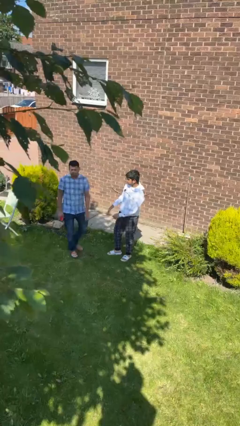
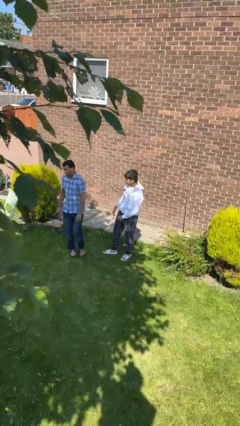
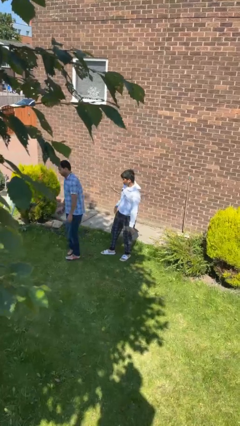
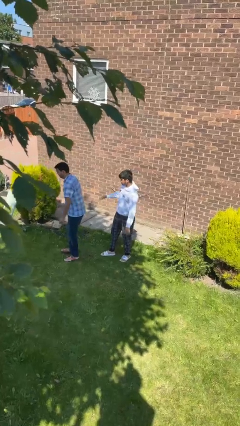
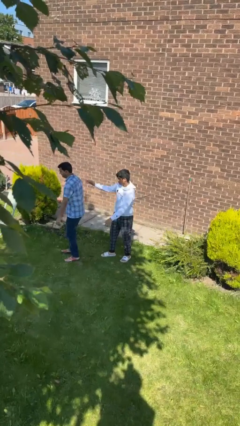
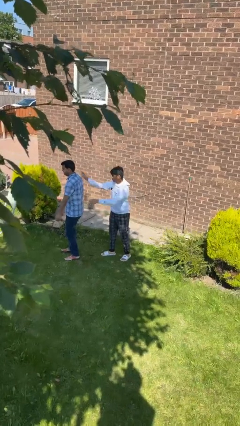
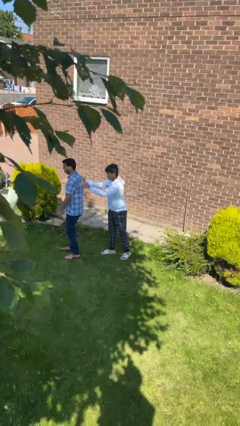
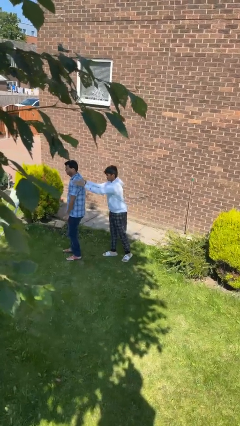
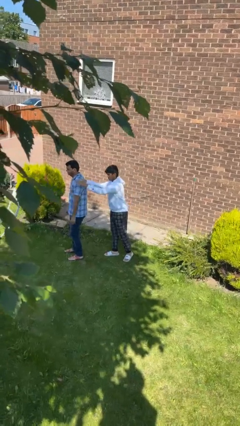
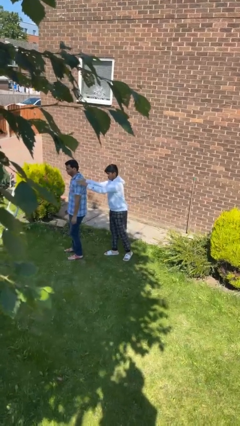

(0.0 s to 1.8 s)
person grabs person by shoulder

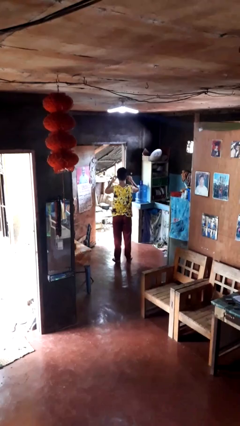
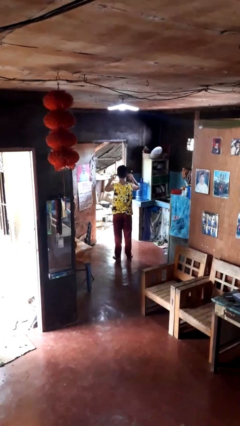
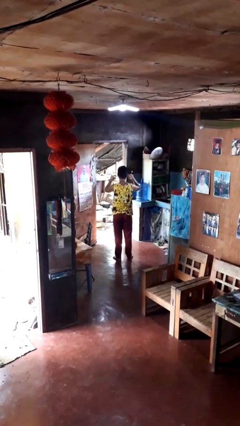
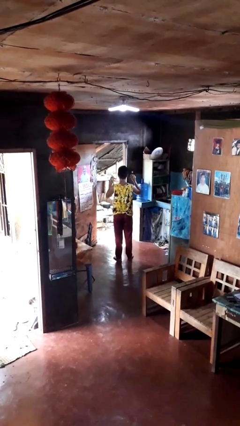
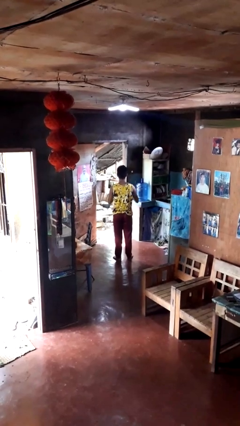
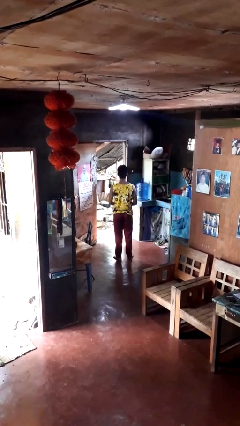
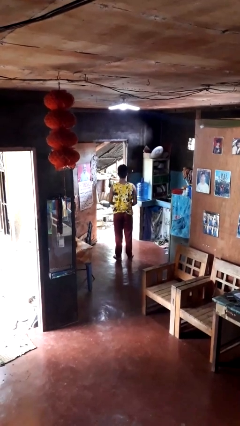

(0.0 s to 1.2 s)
person takes off headphones

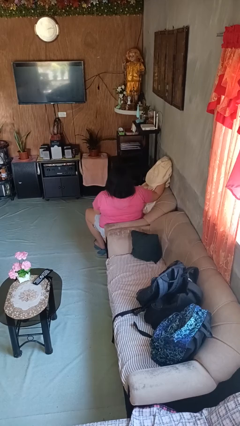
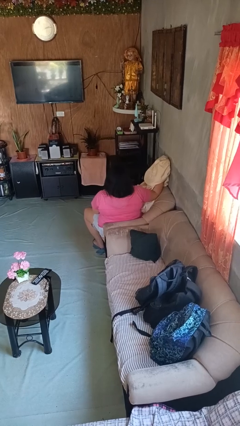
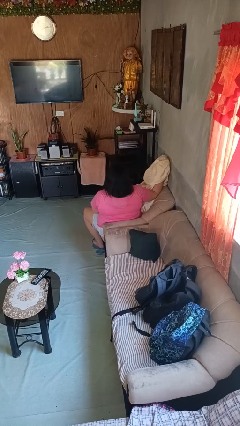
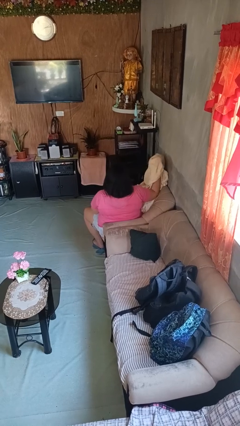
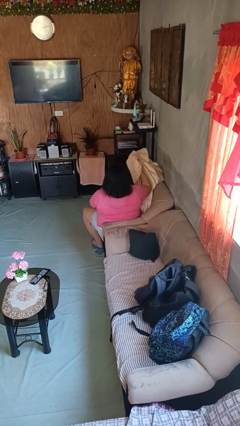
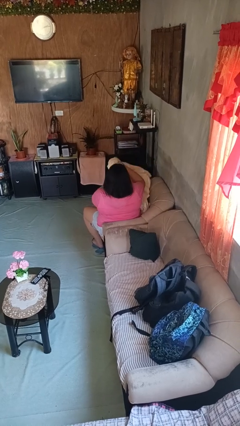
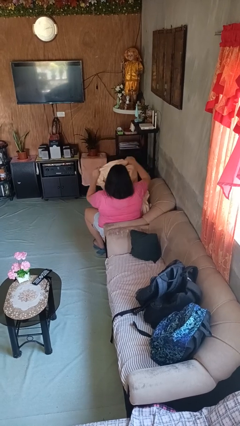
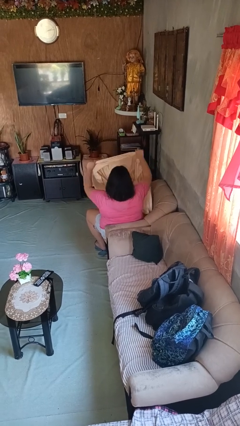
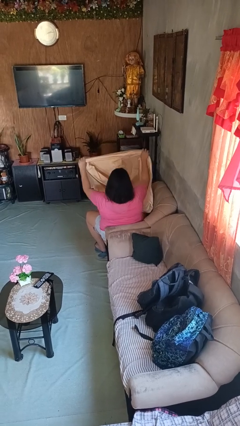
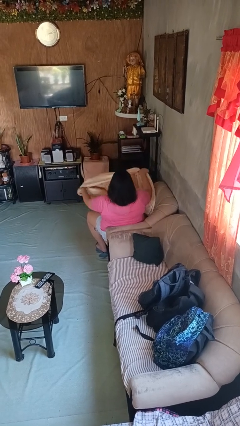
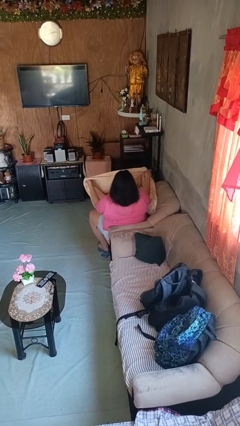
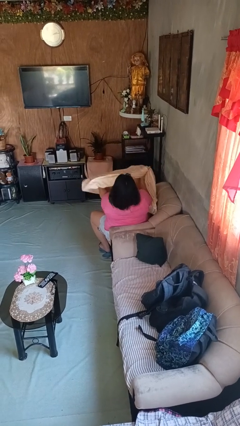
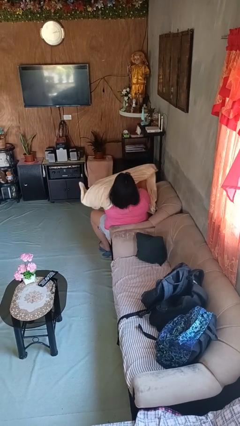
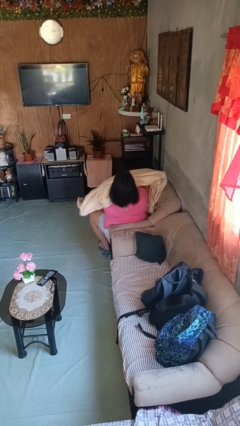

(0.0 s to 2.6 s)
person covers with blanket

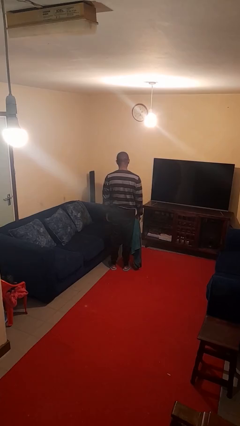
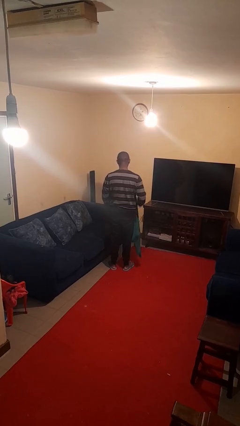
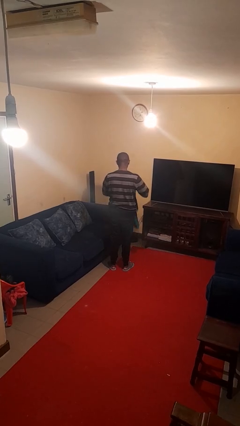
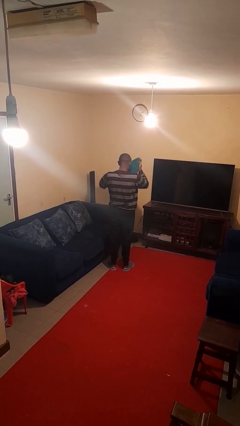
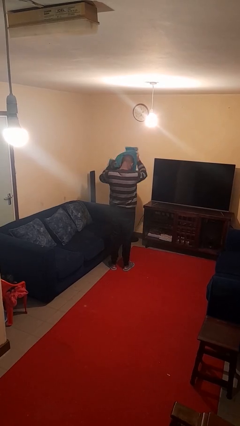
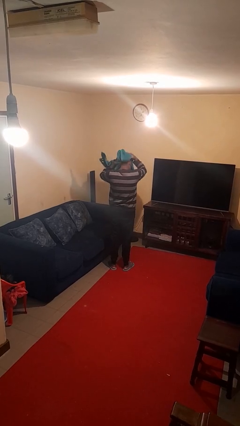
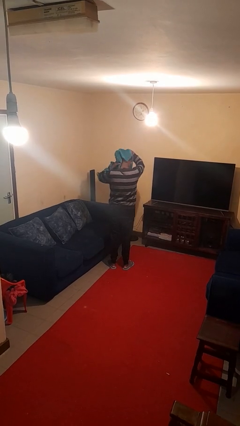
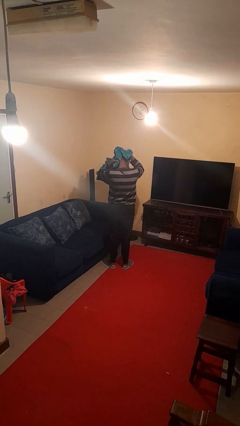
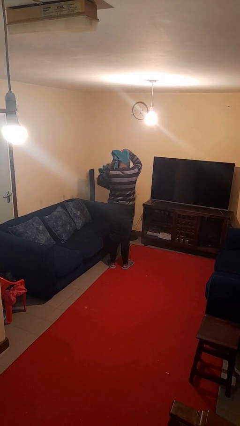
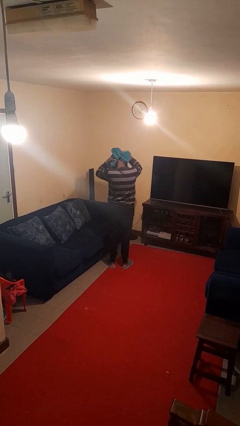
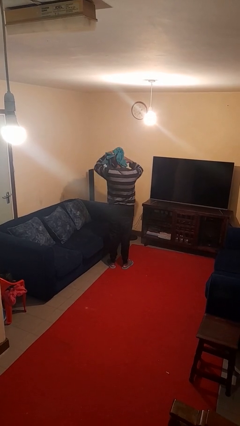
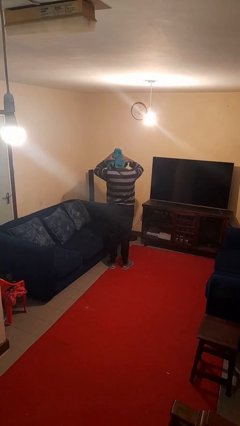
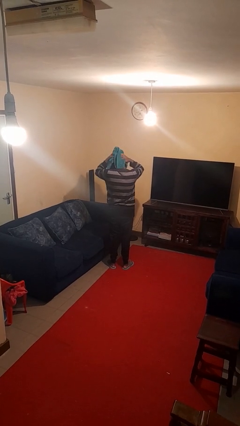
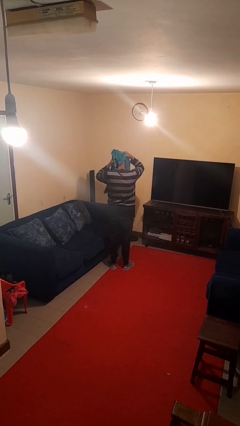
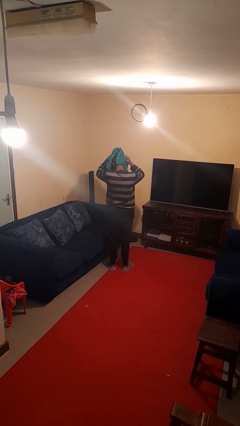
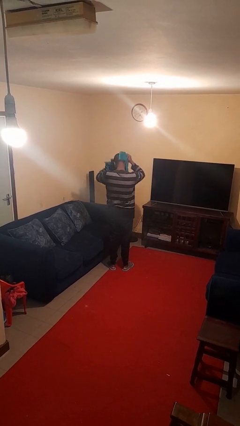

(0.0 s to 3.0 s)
person dries hair with towel

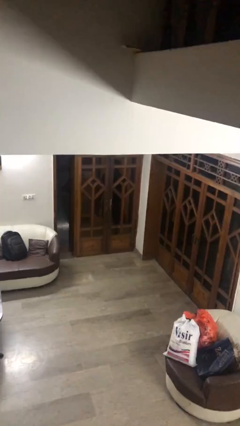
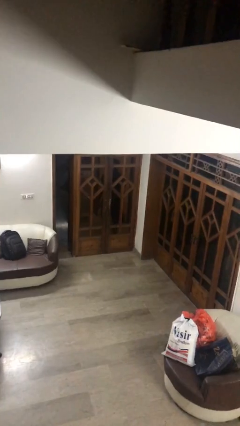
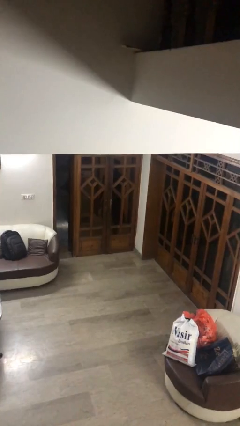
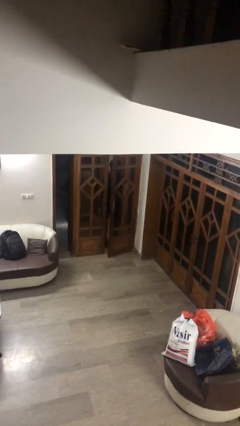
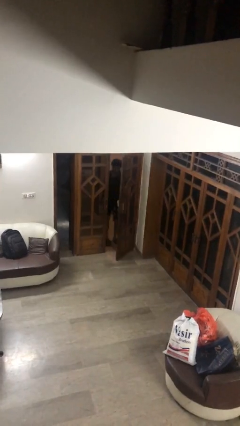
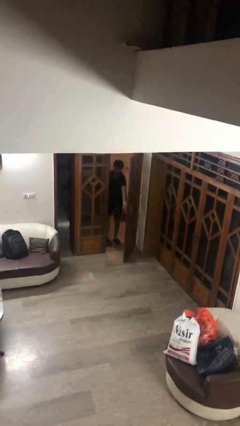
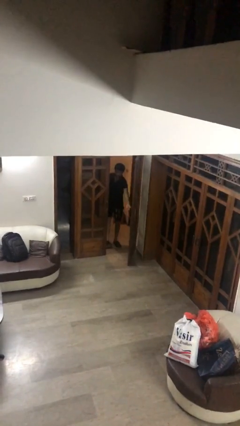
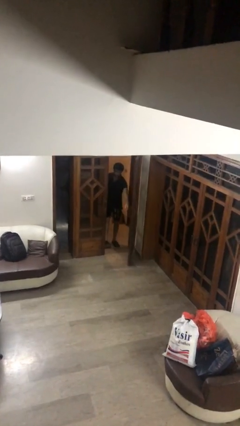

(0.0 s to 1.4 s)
person opens facility door

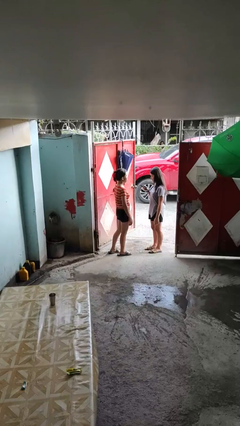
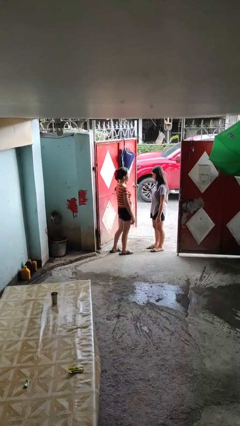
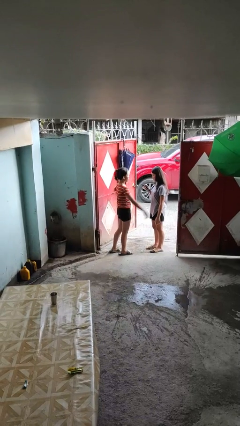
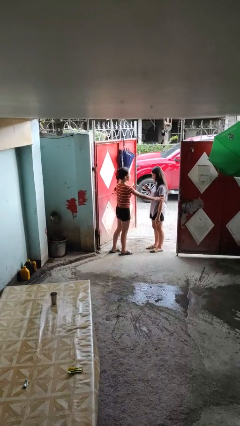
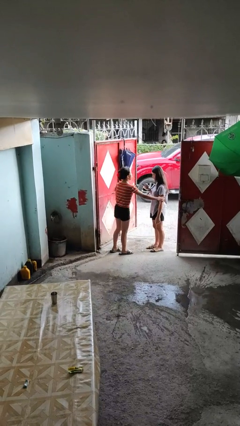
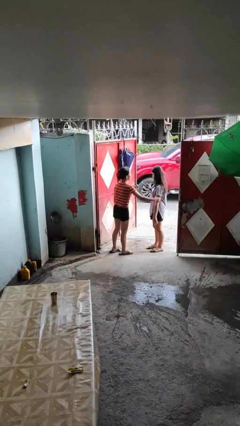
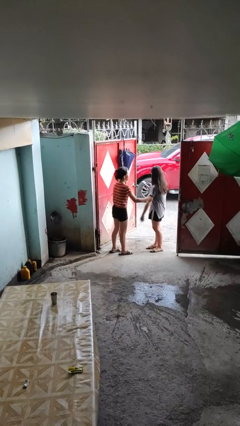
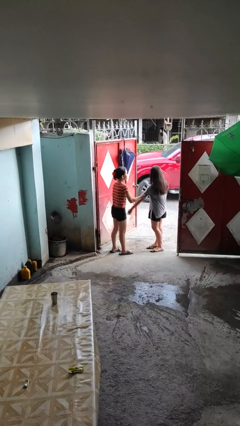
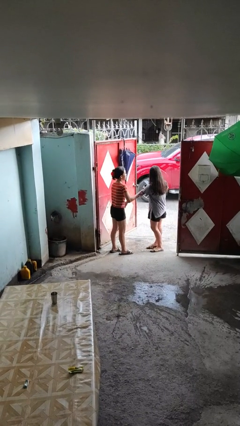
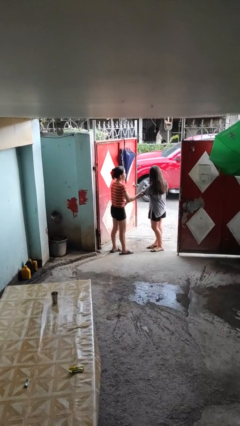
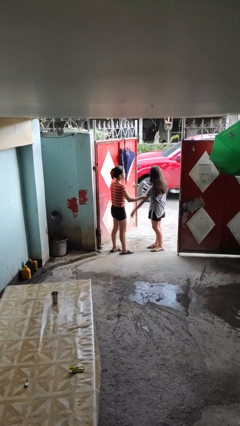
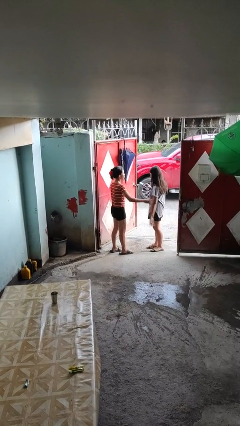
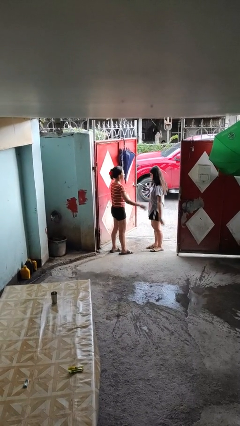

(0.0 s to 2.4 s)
person grabs person by bicep

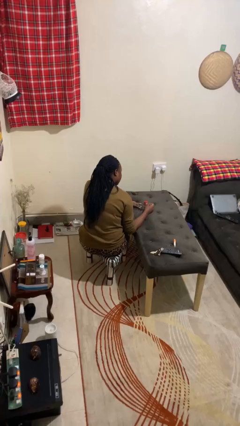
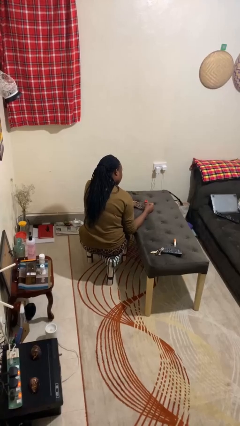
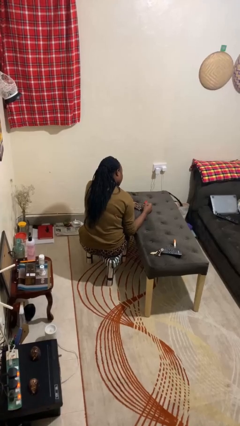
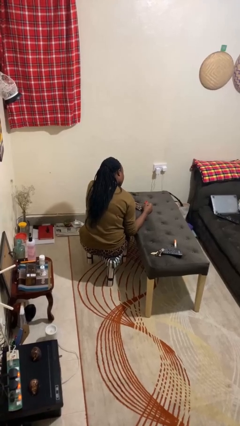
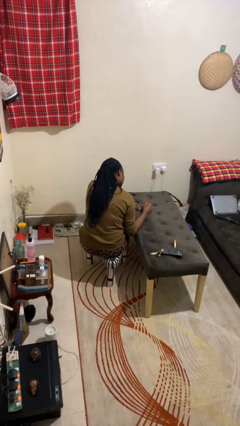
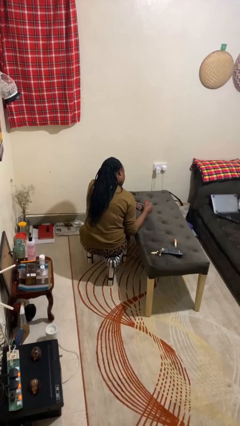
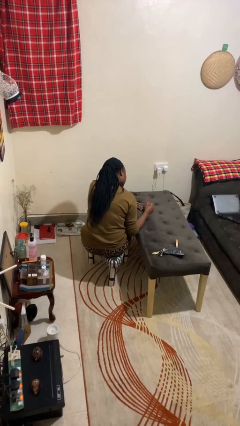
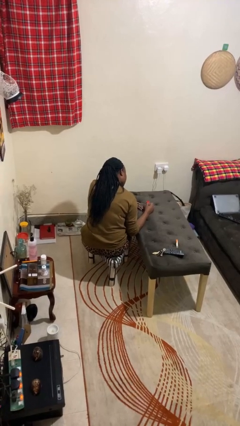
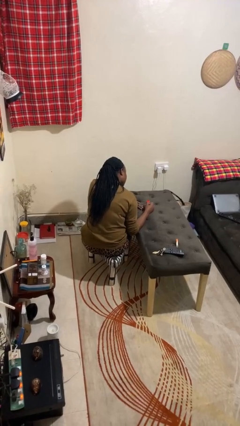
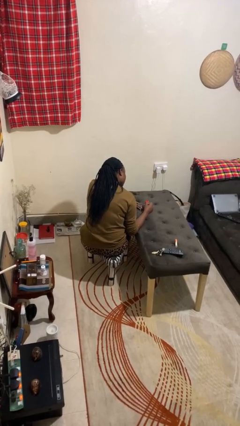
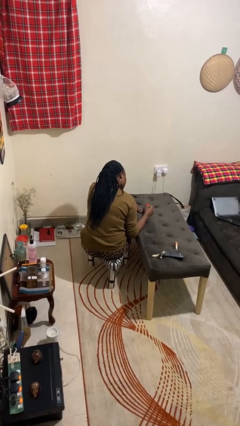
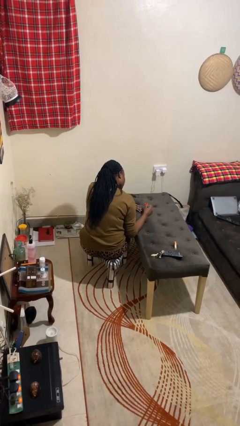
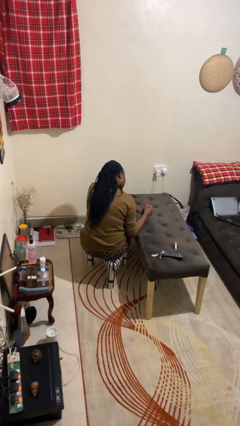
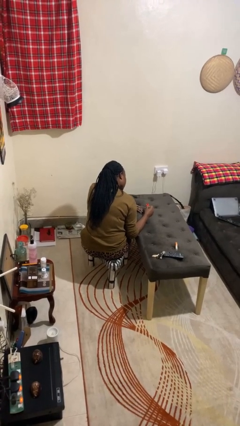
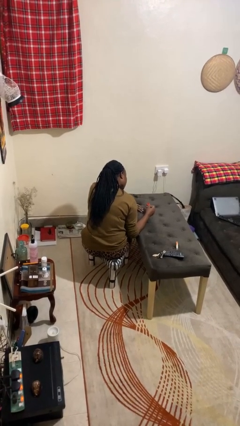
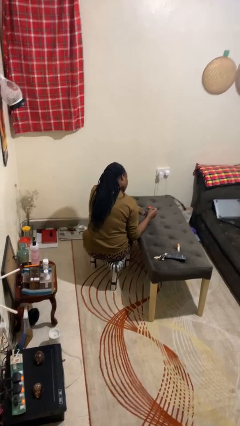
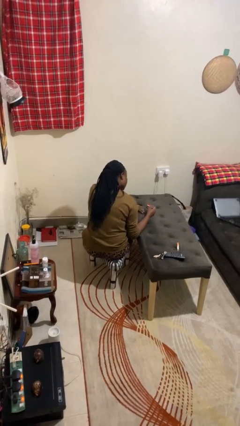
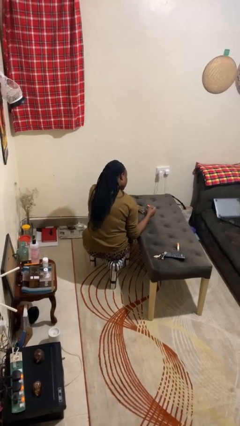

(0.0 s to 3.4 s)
person paints fingernails

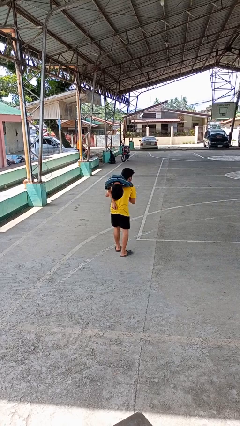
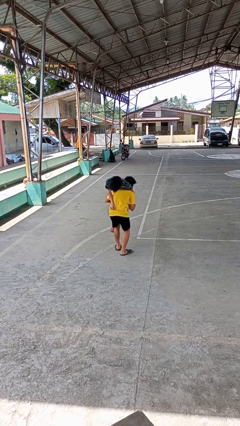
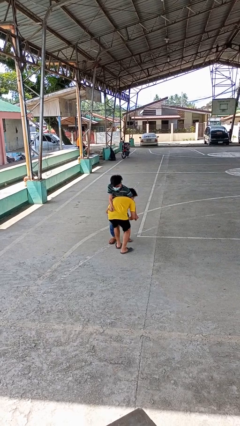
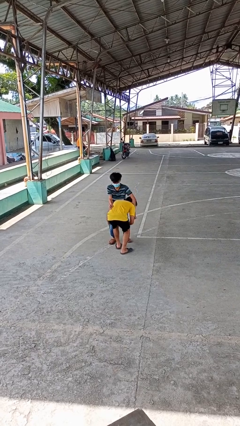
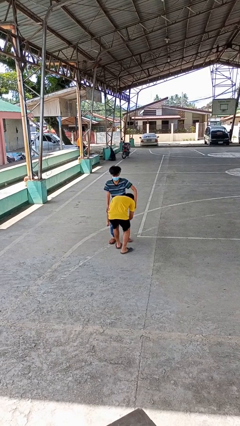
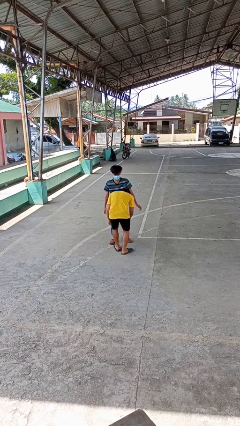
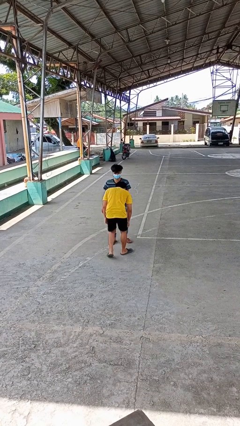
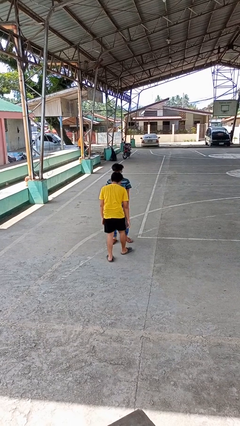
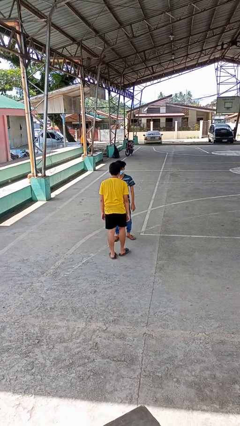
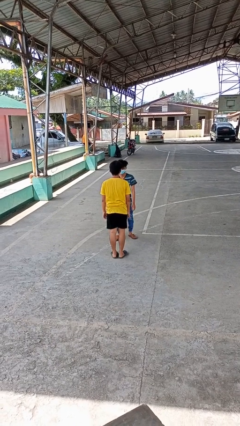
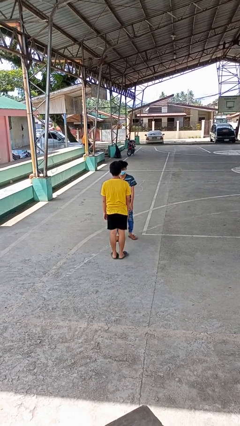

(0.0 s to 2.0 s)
person puts down person
